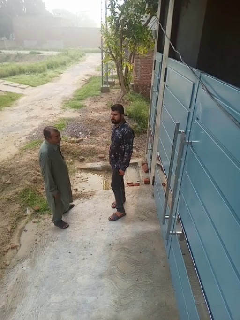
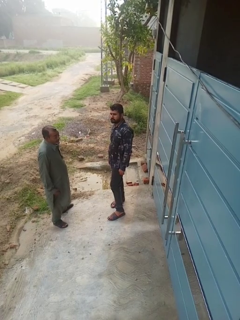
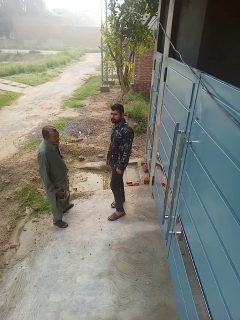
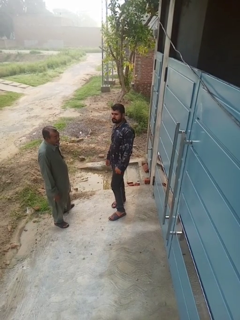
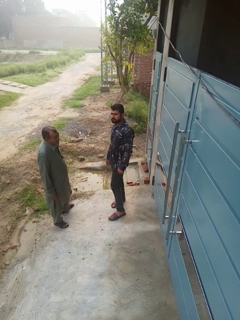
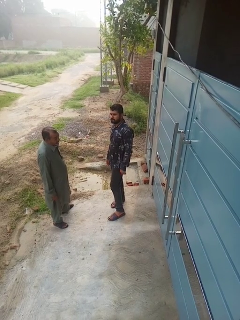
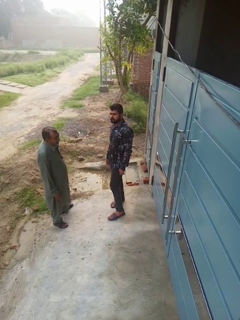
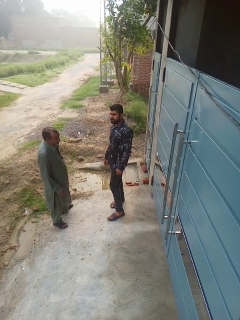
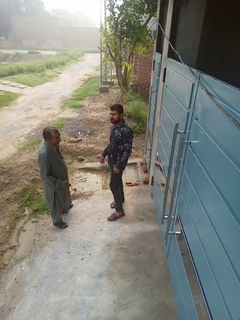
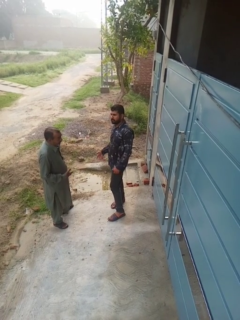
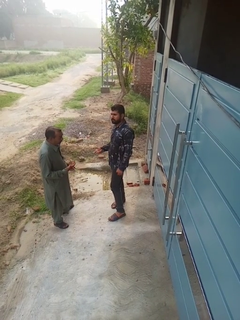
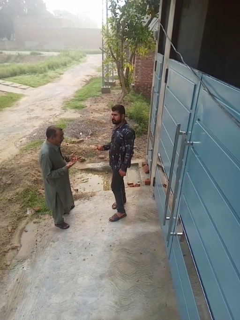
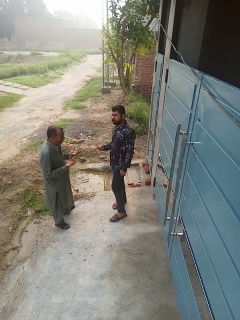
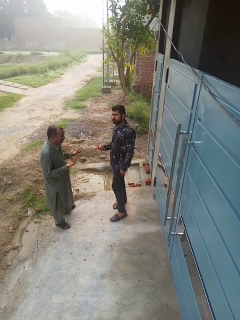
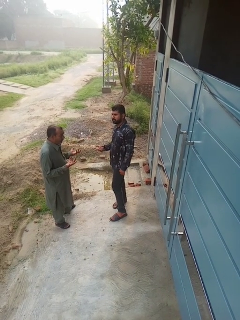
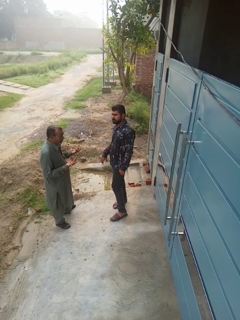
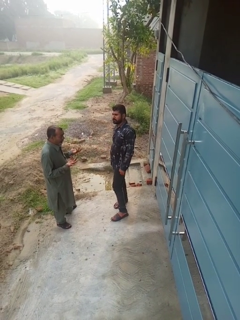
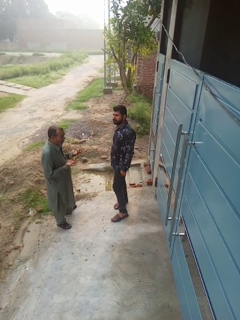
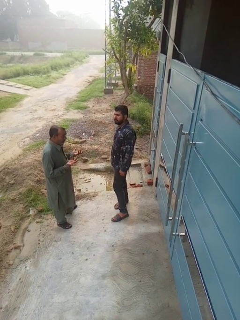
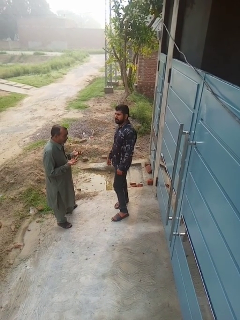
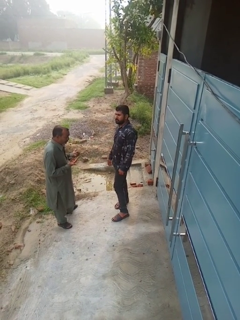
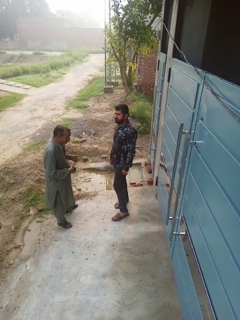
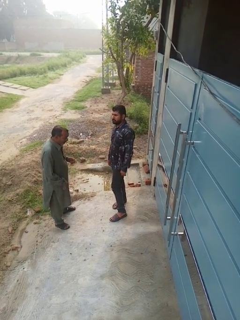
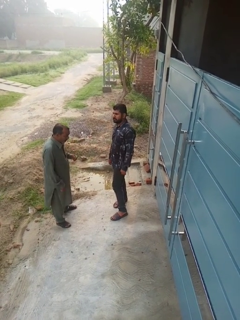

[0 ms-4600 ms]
person talks to person

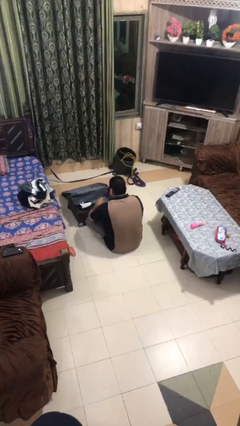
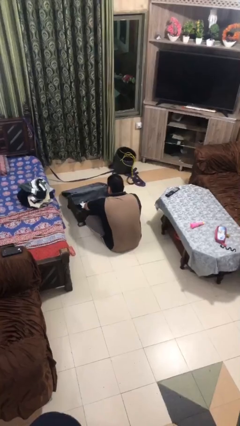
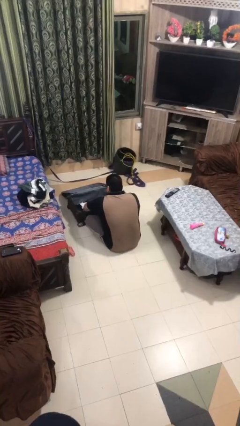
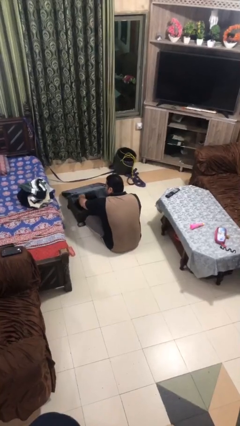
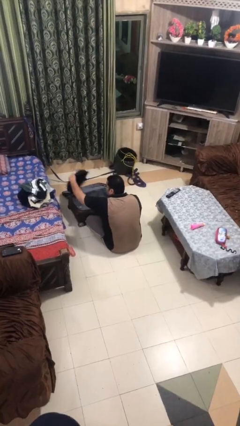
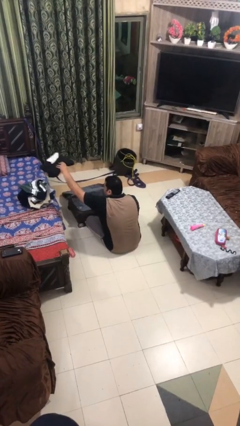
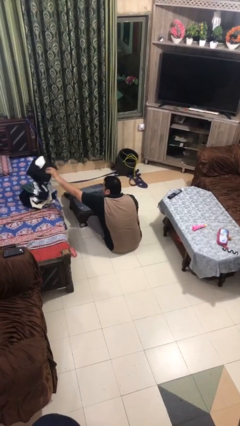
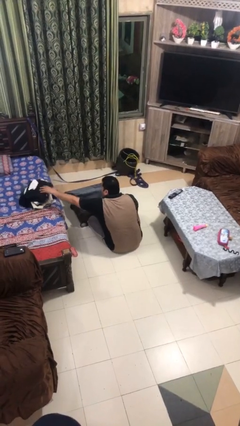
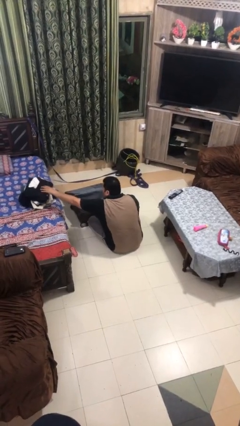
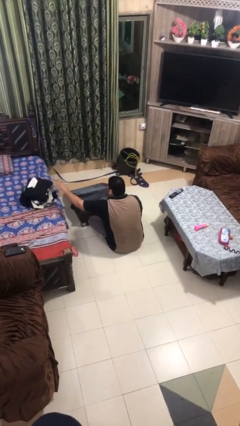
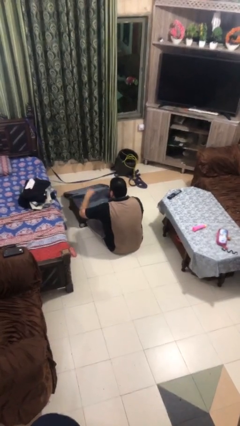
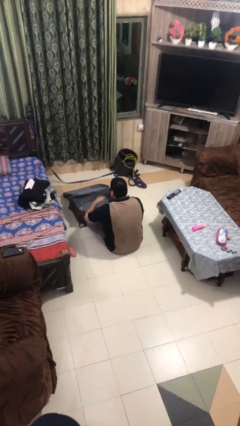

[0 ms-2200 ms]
person unloads clothes from suitcase

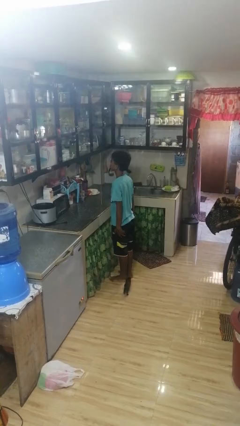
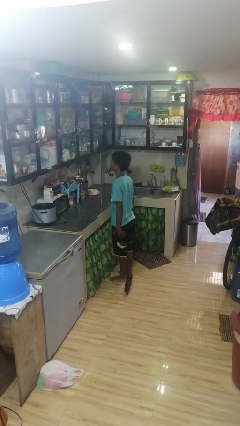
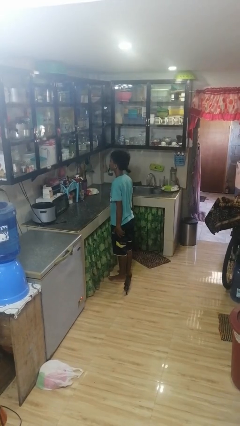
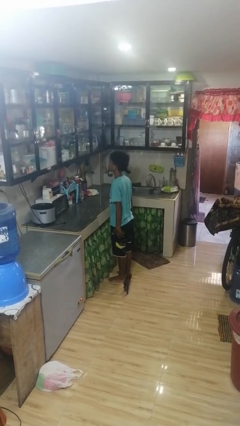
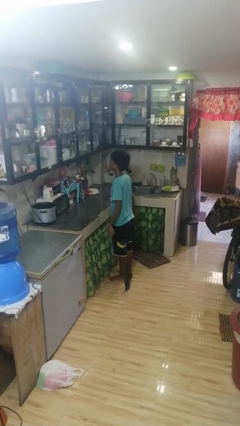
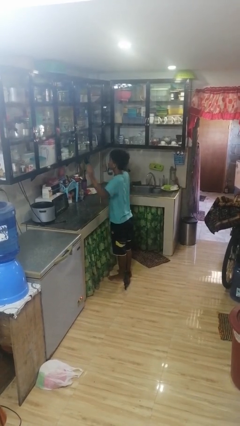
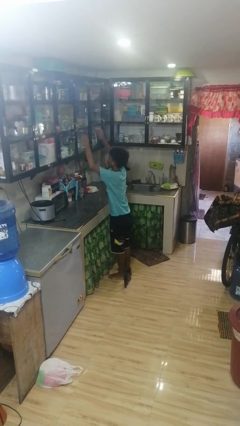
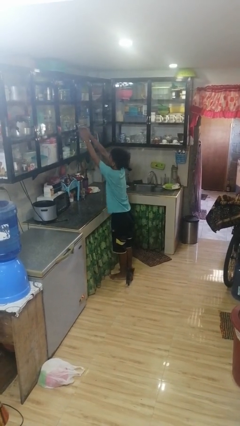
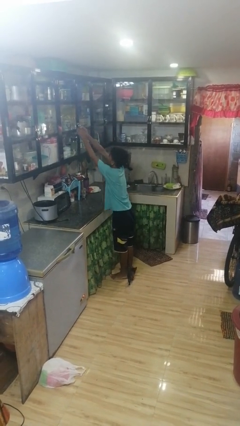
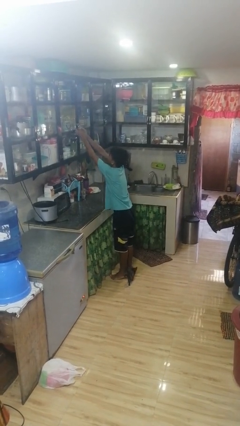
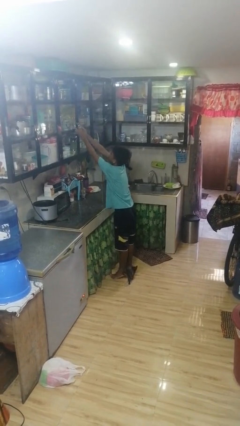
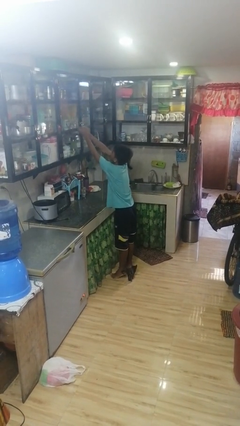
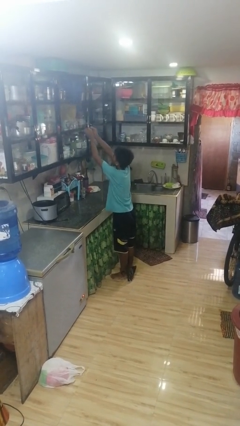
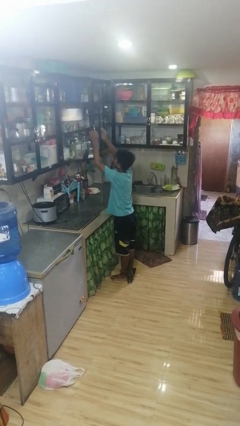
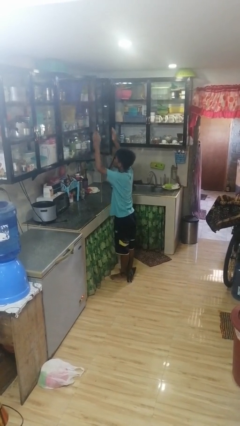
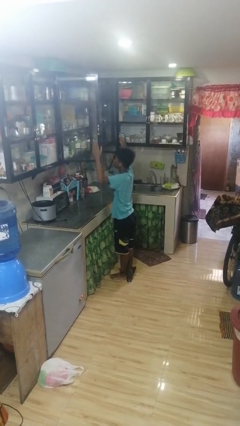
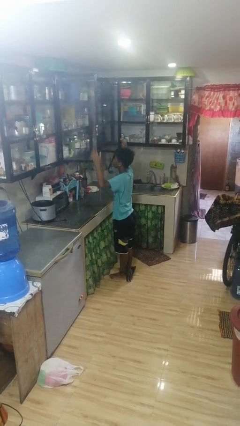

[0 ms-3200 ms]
person opens cabinet

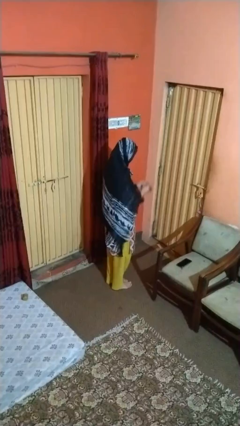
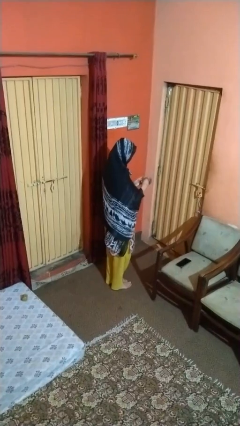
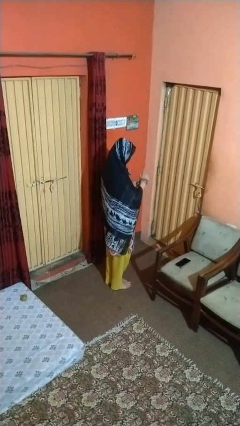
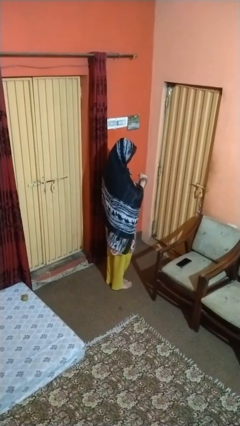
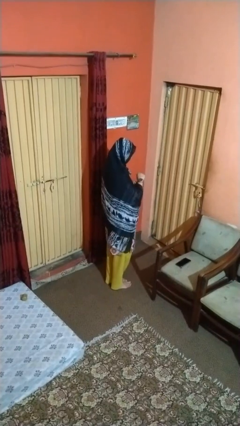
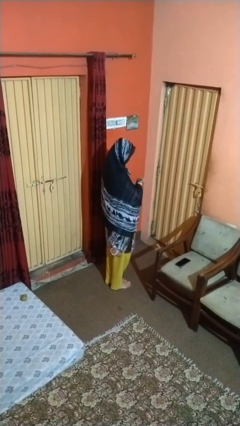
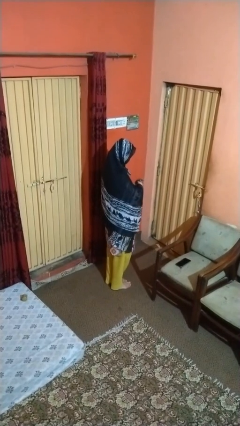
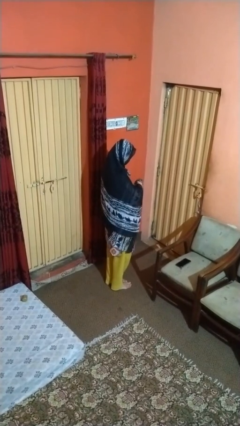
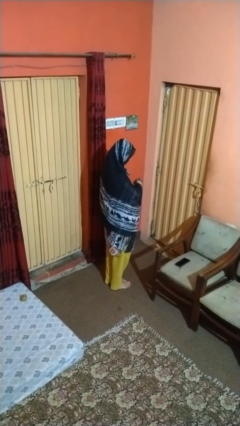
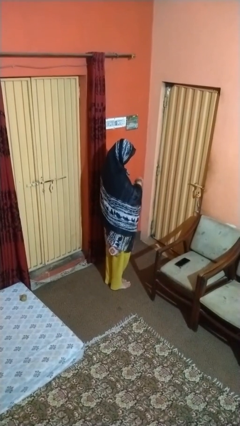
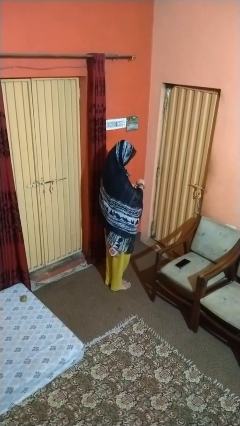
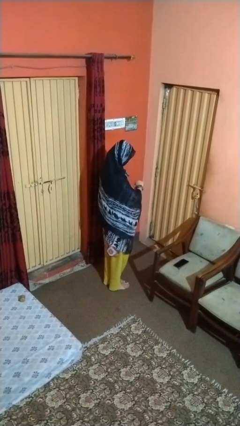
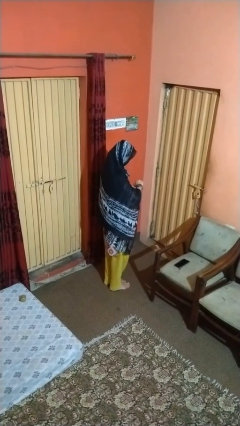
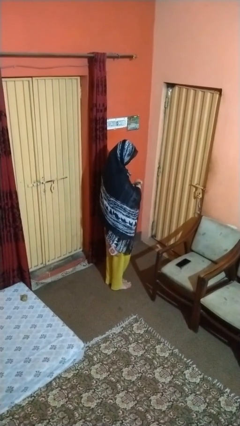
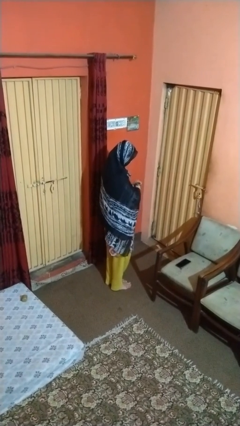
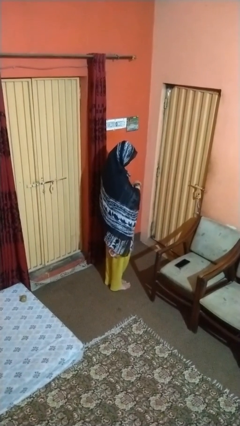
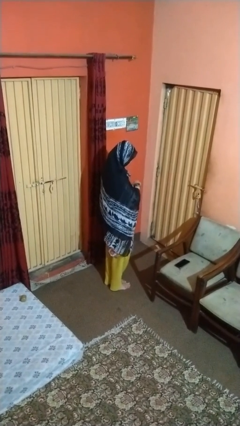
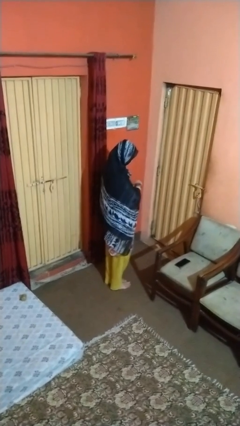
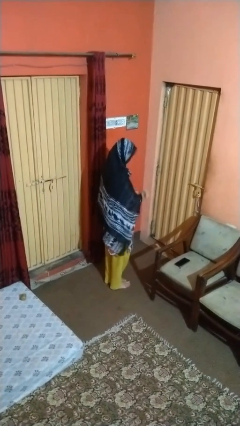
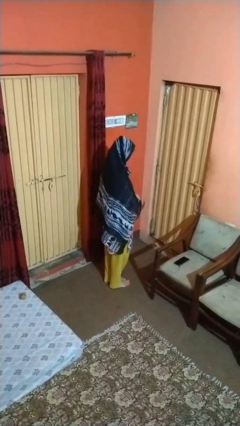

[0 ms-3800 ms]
person puts on wristwatch

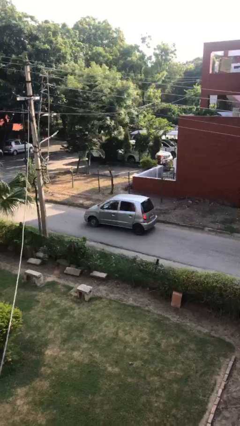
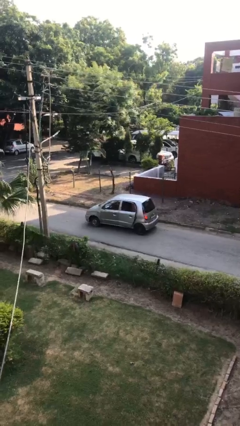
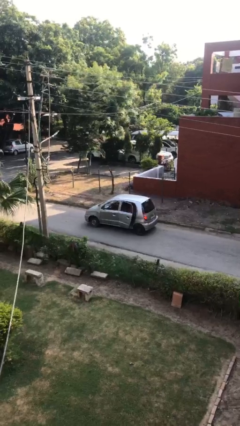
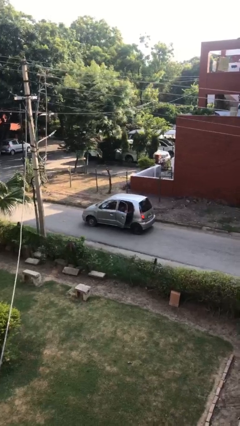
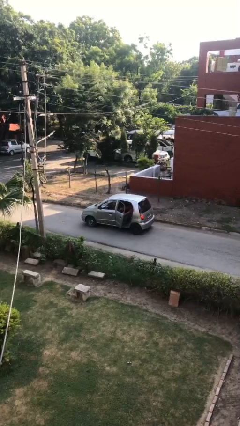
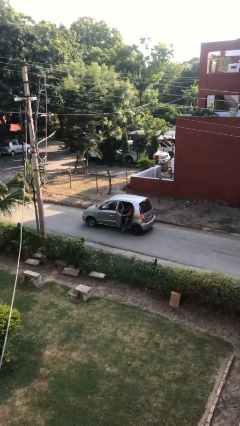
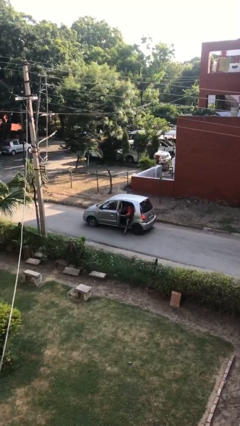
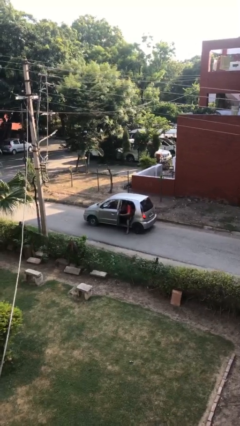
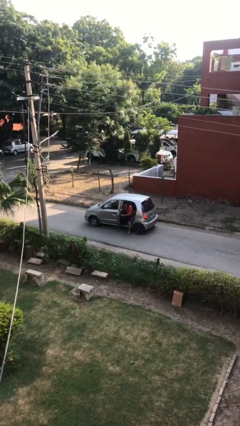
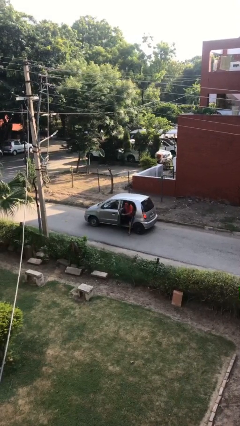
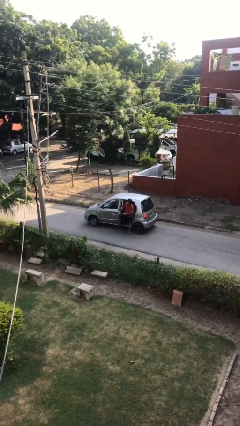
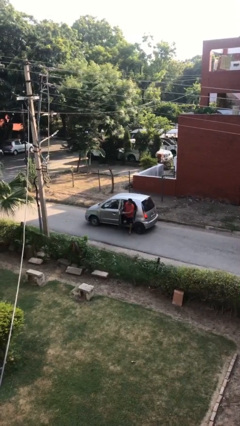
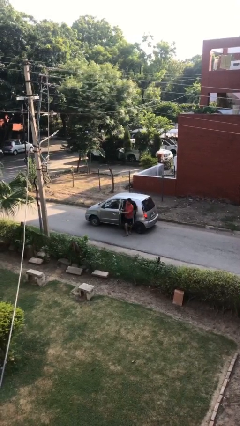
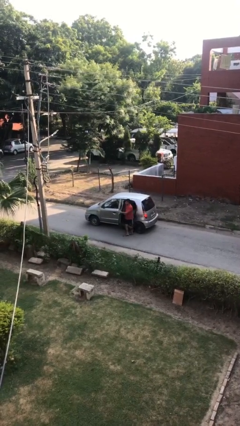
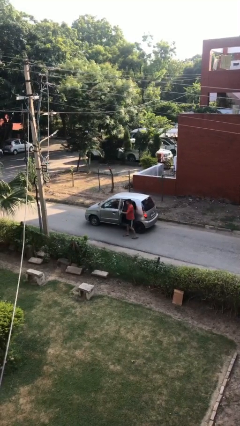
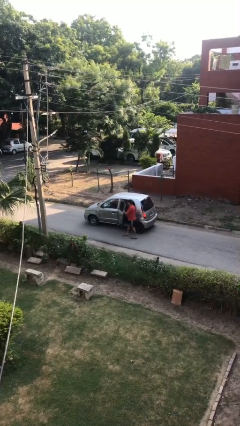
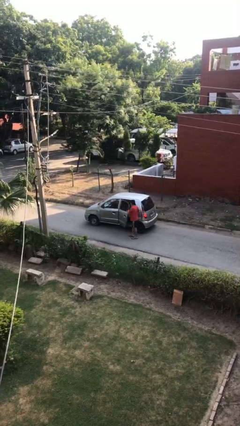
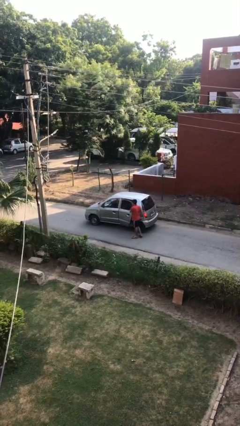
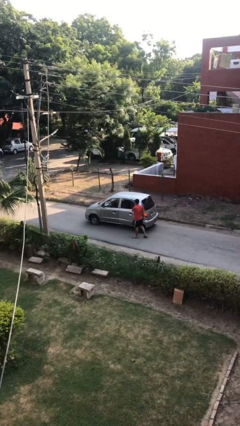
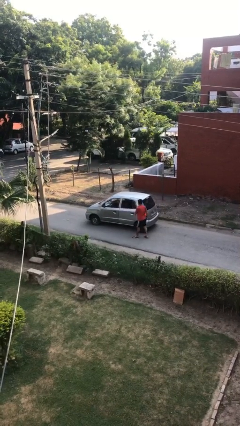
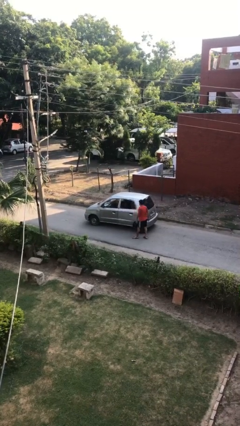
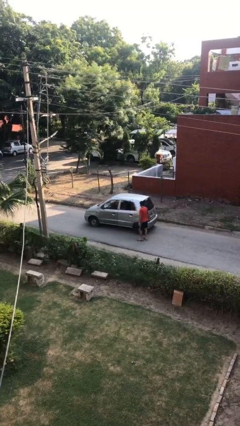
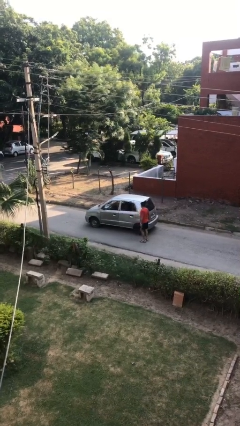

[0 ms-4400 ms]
car drops off person

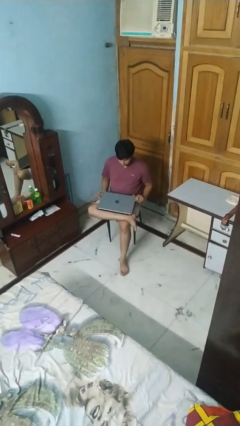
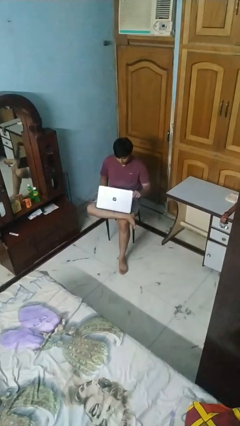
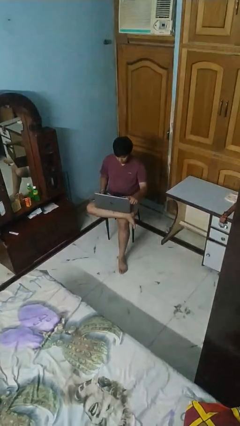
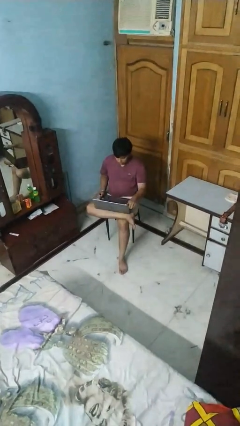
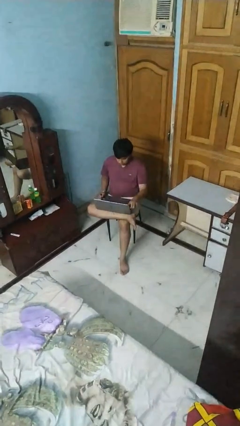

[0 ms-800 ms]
person opens laptop
